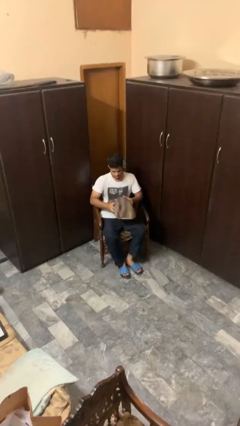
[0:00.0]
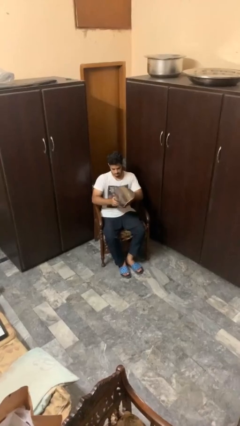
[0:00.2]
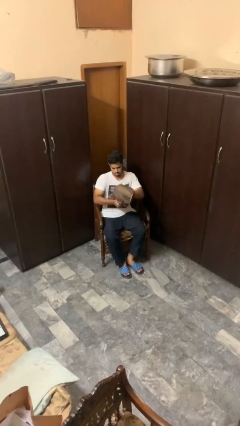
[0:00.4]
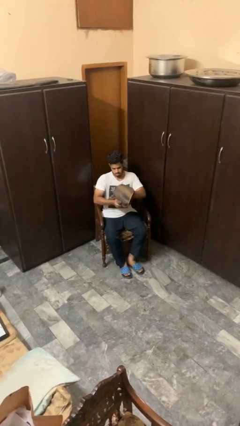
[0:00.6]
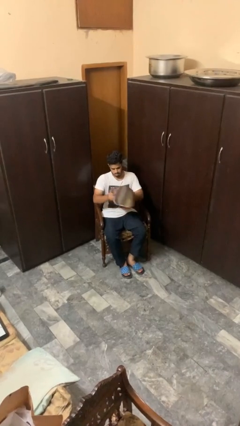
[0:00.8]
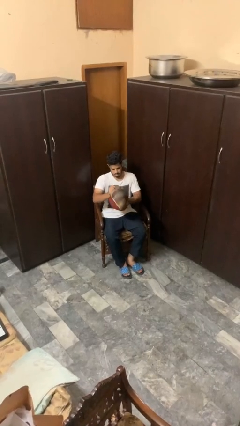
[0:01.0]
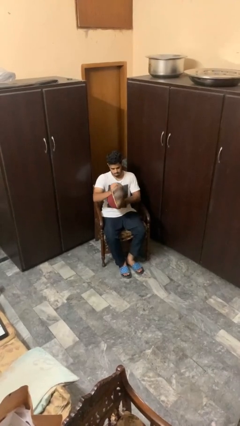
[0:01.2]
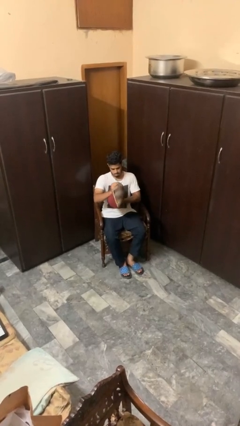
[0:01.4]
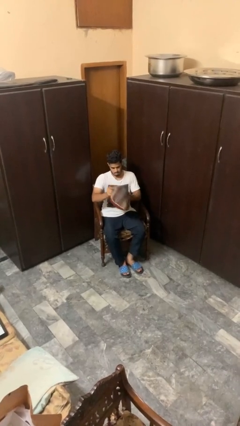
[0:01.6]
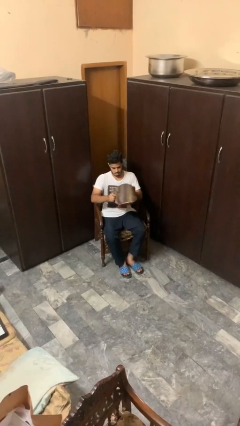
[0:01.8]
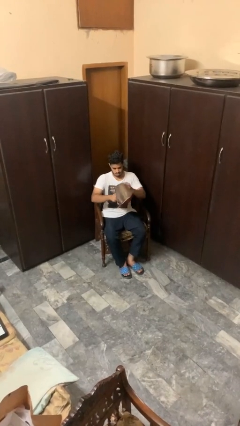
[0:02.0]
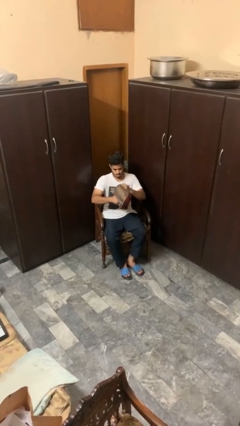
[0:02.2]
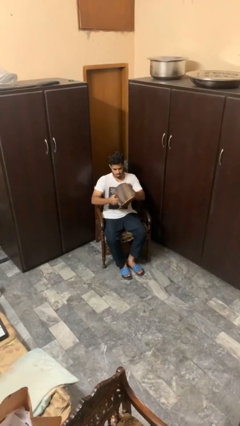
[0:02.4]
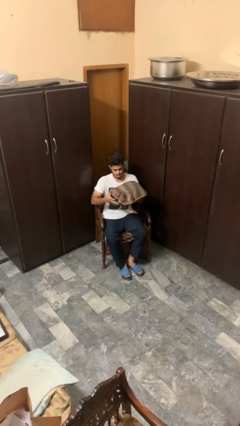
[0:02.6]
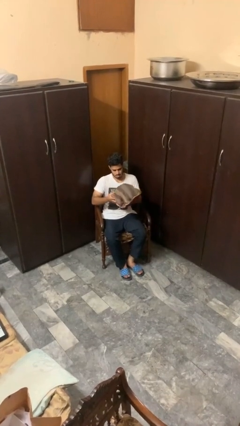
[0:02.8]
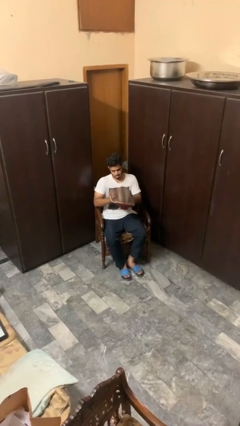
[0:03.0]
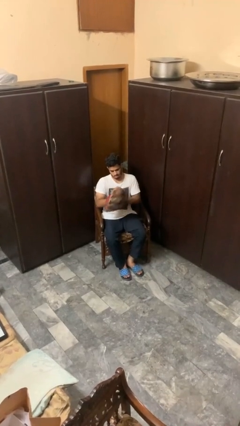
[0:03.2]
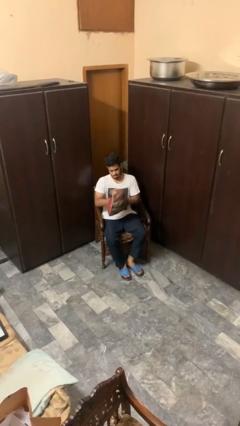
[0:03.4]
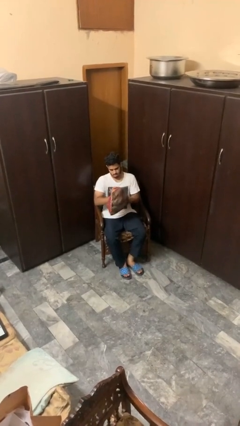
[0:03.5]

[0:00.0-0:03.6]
person squeezes object

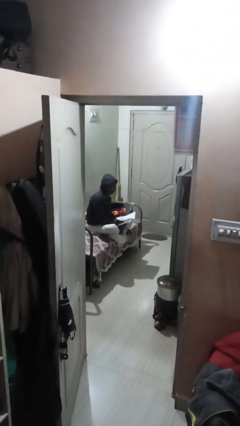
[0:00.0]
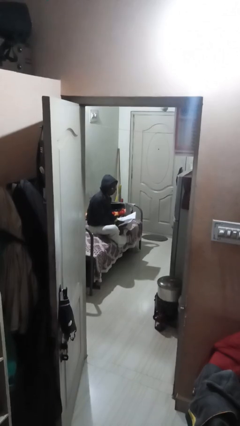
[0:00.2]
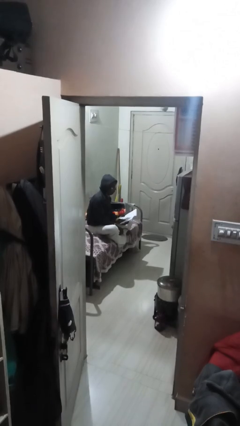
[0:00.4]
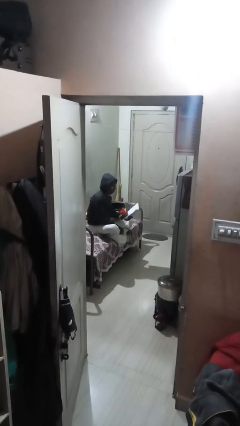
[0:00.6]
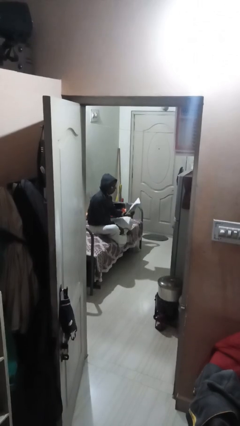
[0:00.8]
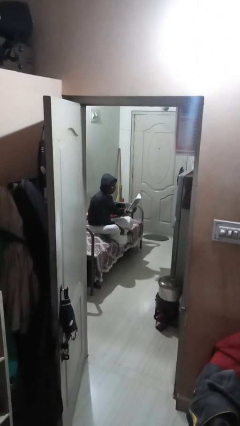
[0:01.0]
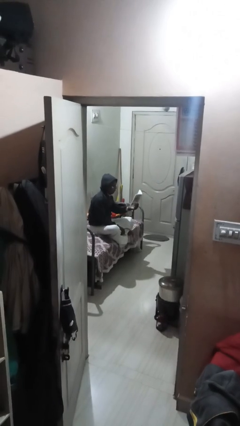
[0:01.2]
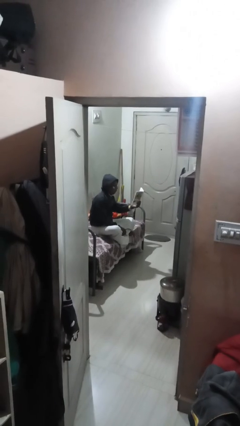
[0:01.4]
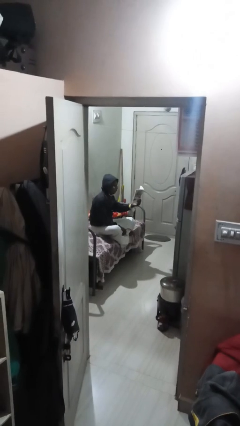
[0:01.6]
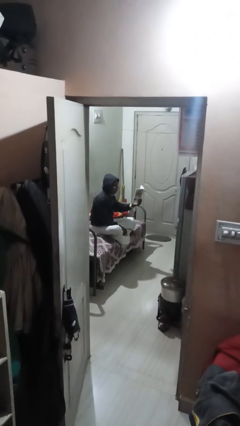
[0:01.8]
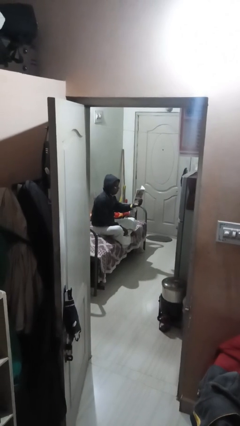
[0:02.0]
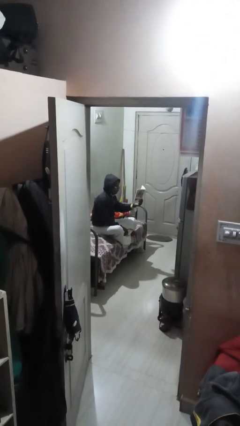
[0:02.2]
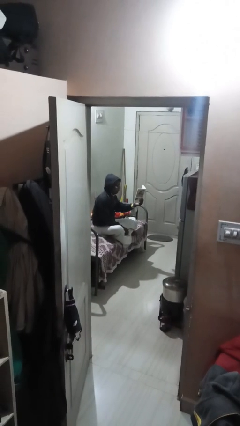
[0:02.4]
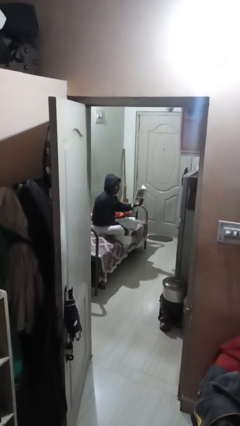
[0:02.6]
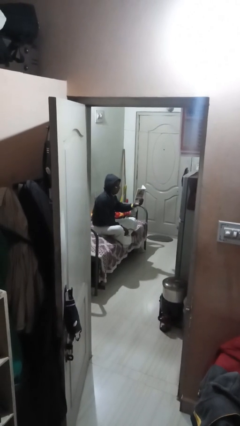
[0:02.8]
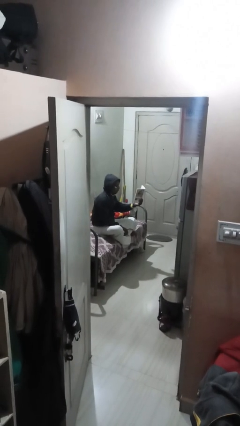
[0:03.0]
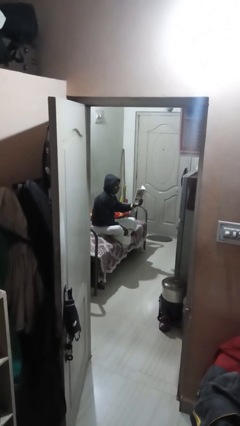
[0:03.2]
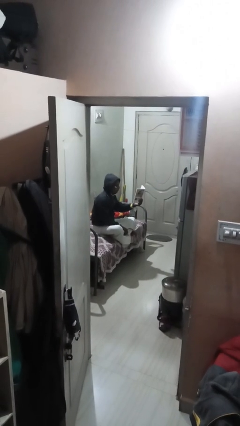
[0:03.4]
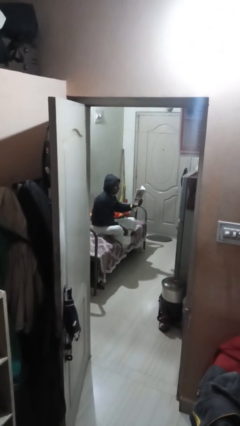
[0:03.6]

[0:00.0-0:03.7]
person reads document

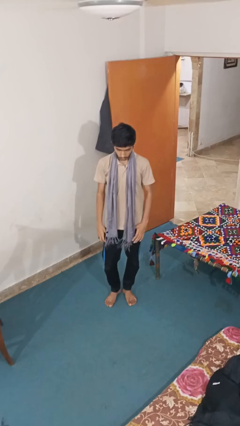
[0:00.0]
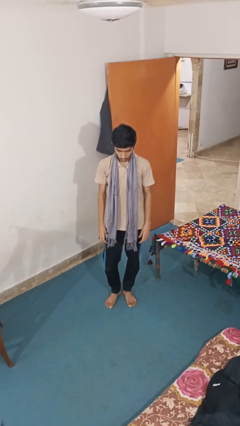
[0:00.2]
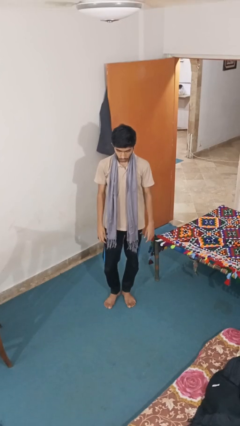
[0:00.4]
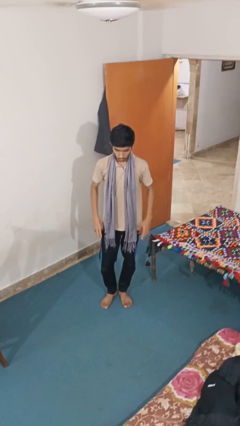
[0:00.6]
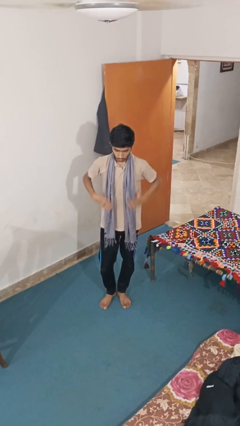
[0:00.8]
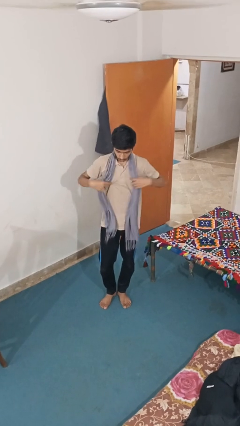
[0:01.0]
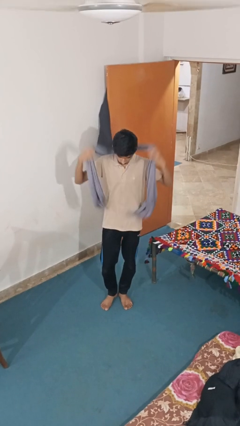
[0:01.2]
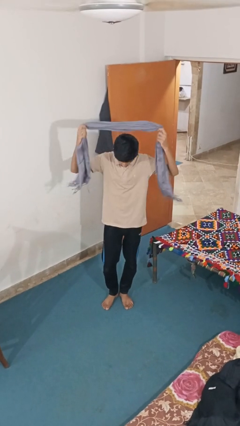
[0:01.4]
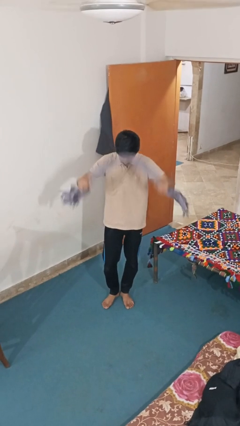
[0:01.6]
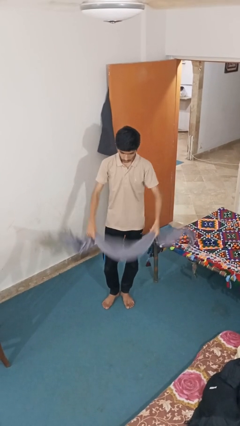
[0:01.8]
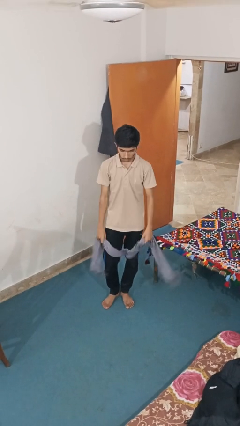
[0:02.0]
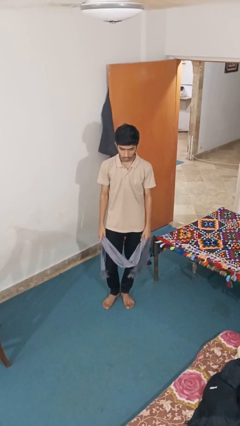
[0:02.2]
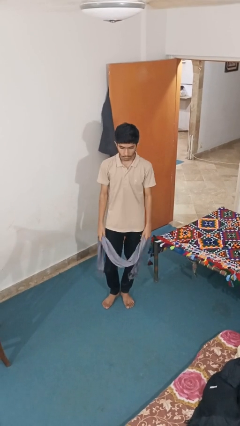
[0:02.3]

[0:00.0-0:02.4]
person takes off scarf

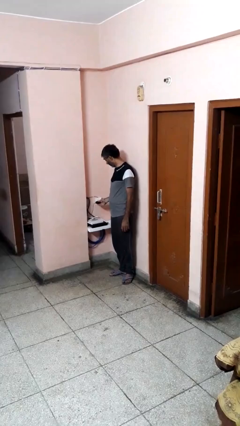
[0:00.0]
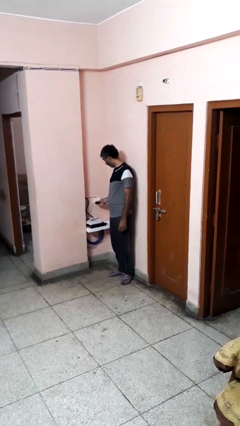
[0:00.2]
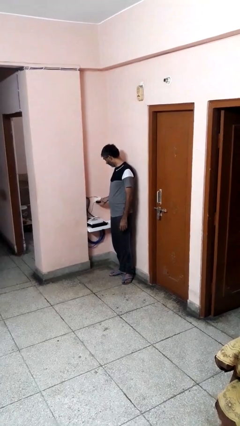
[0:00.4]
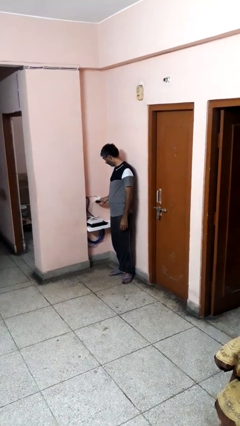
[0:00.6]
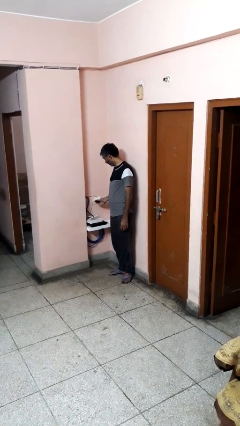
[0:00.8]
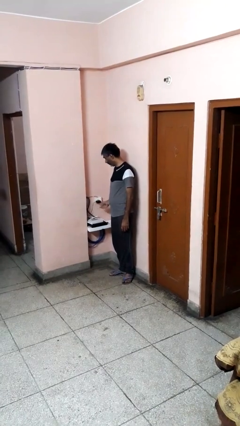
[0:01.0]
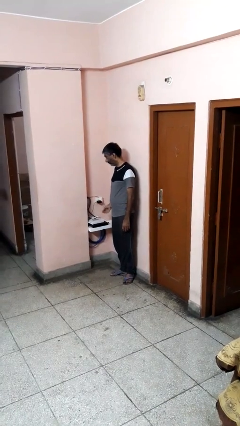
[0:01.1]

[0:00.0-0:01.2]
person plugs into electrical socket

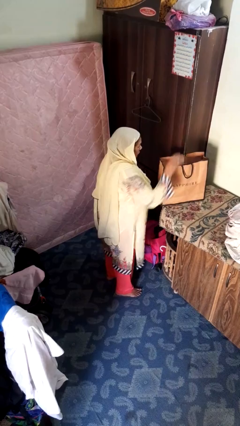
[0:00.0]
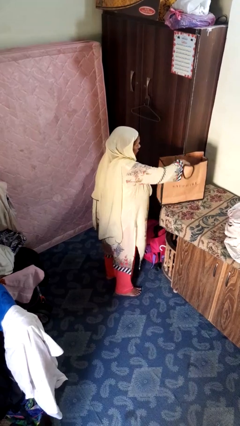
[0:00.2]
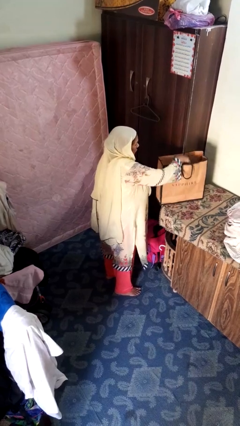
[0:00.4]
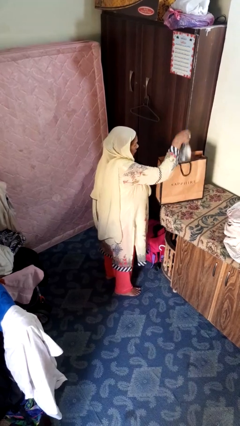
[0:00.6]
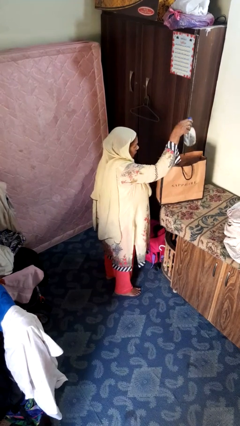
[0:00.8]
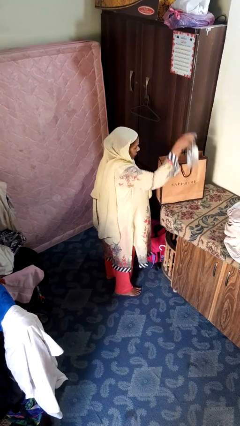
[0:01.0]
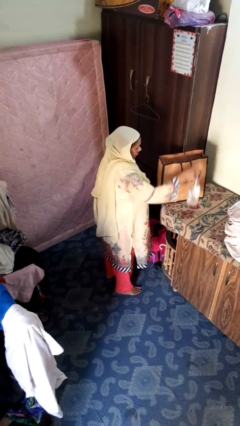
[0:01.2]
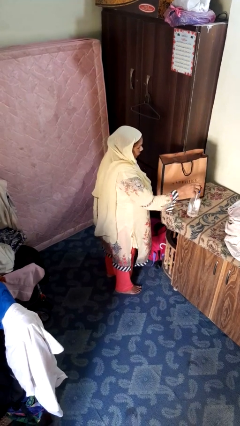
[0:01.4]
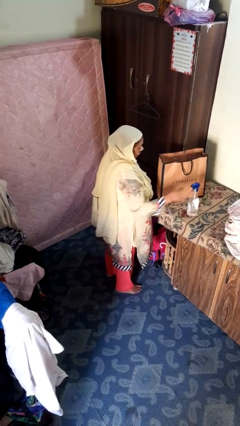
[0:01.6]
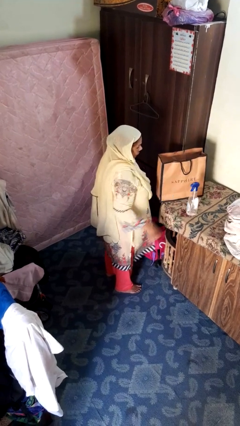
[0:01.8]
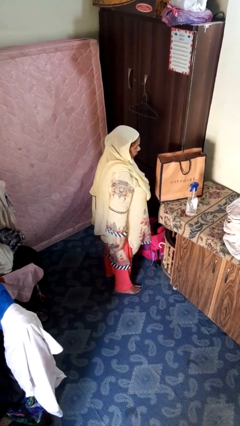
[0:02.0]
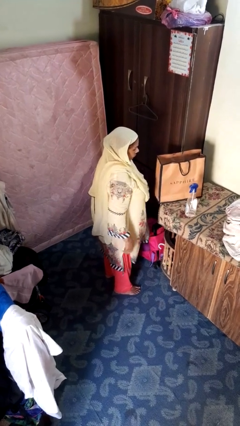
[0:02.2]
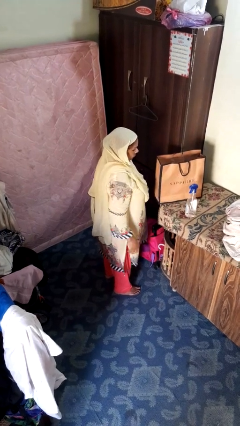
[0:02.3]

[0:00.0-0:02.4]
person takes object from bag

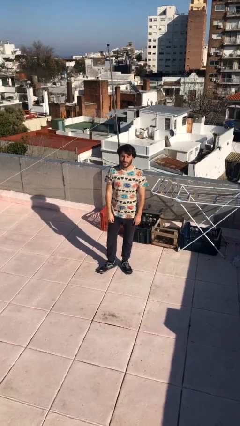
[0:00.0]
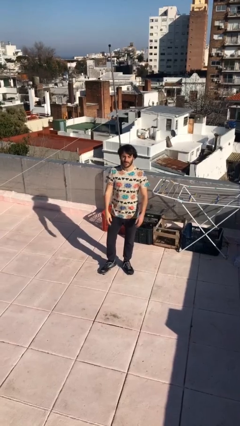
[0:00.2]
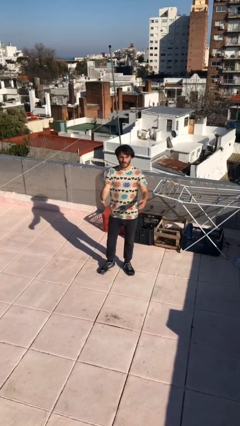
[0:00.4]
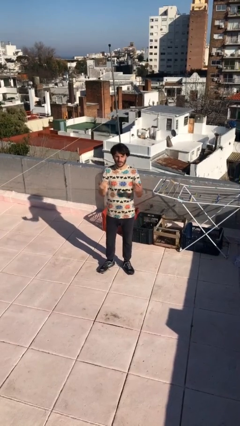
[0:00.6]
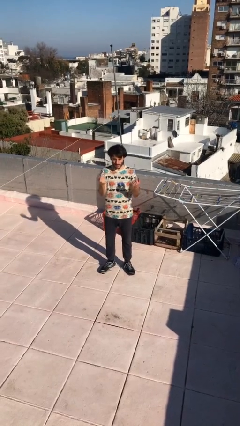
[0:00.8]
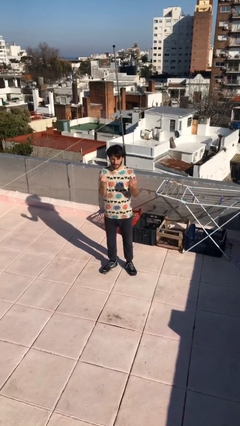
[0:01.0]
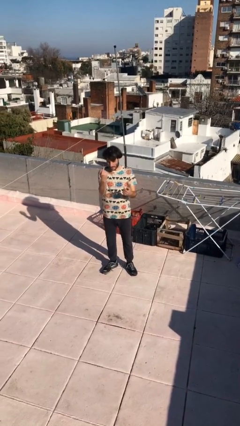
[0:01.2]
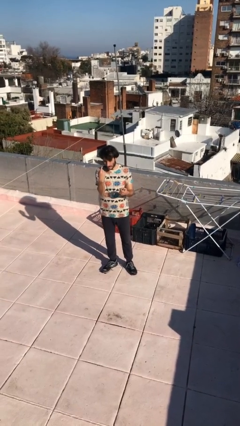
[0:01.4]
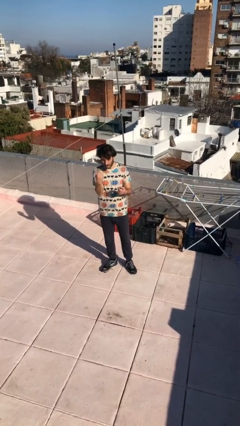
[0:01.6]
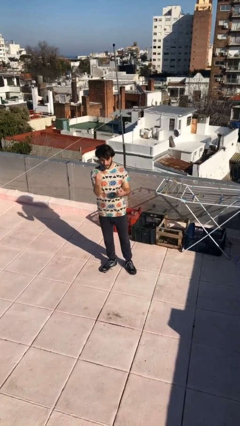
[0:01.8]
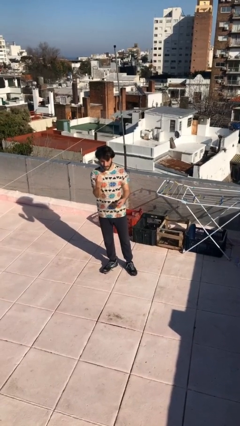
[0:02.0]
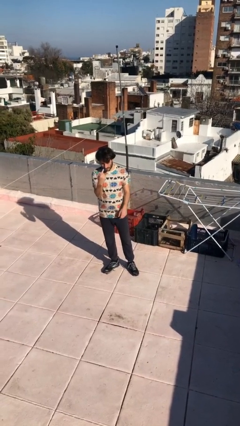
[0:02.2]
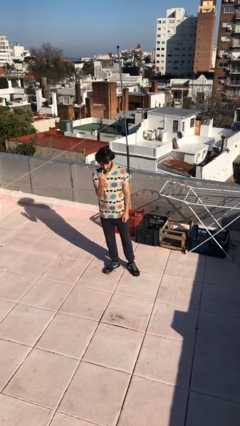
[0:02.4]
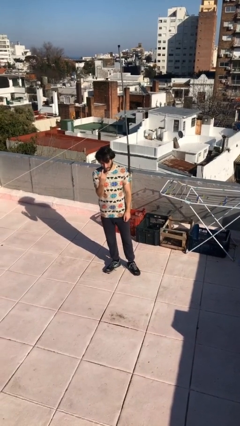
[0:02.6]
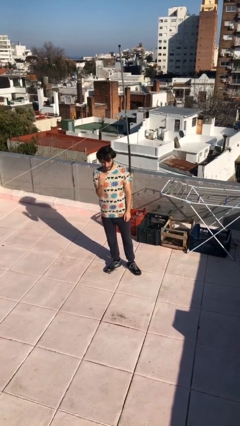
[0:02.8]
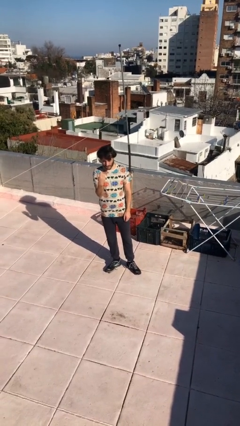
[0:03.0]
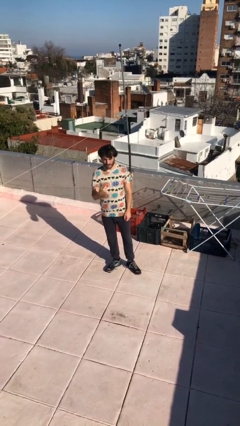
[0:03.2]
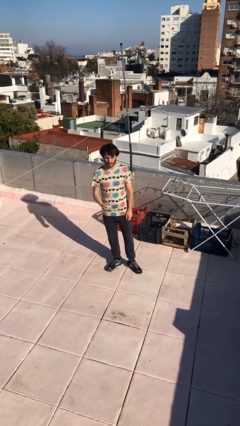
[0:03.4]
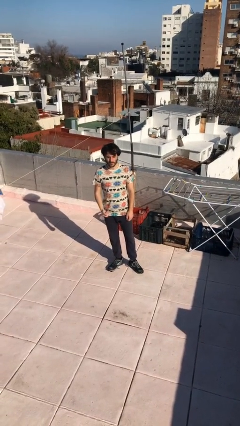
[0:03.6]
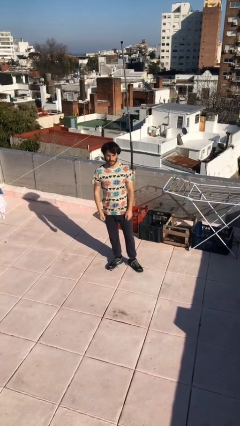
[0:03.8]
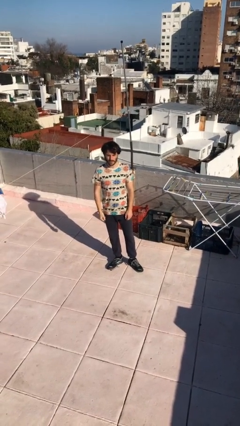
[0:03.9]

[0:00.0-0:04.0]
person gestures come here
